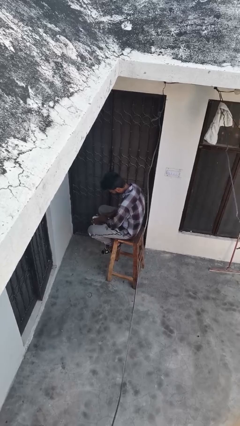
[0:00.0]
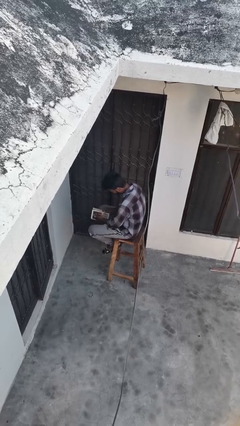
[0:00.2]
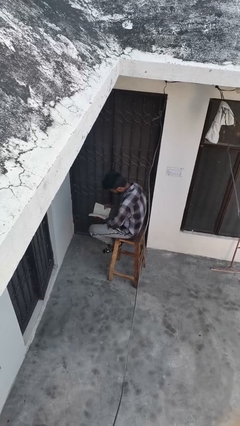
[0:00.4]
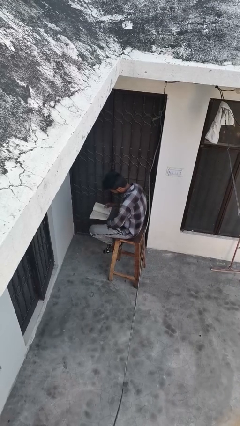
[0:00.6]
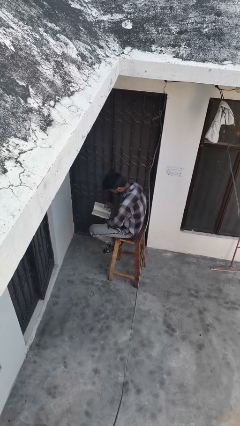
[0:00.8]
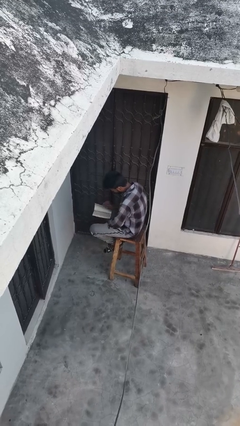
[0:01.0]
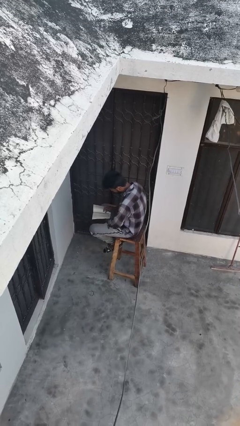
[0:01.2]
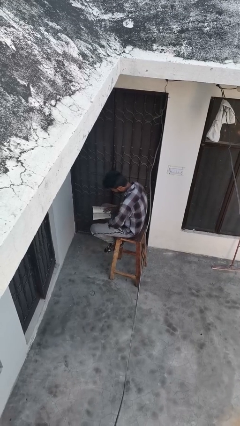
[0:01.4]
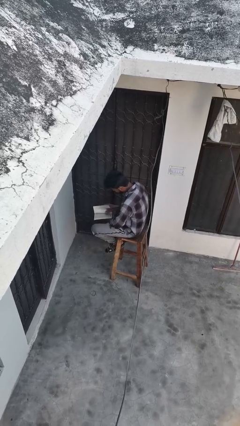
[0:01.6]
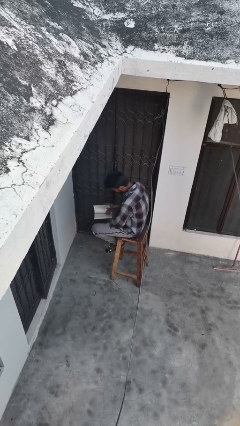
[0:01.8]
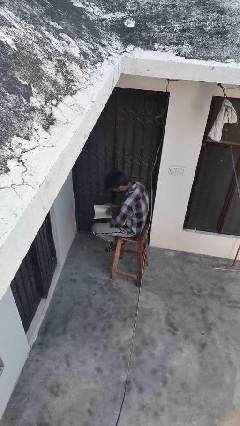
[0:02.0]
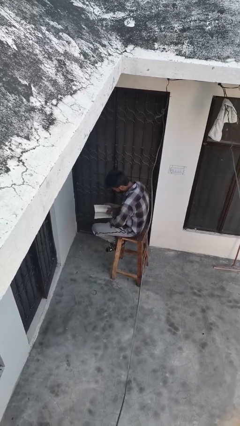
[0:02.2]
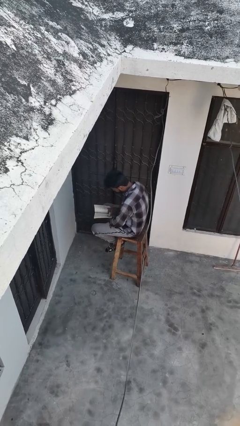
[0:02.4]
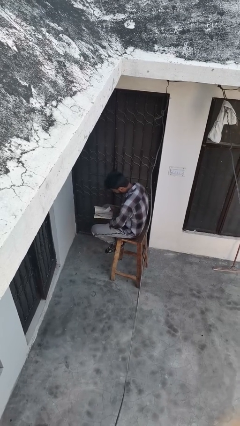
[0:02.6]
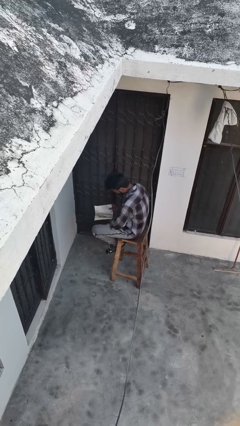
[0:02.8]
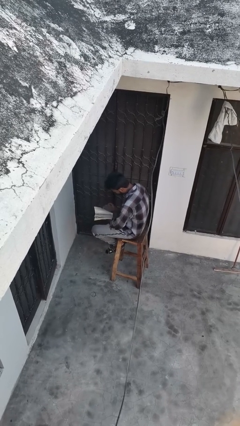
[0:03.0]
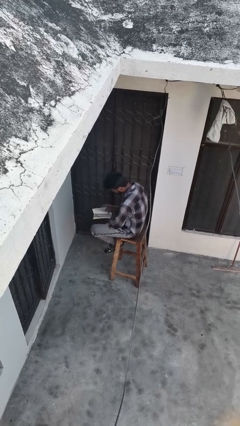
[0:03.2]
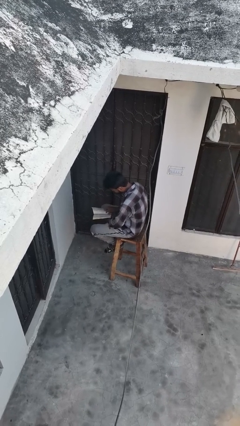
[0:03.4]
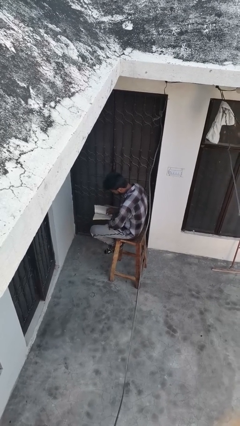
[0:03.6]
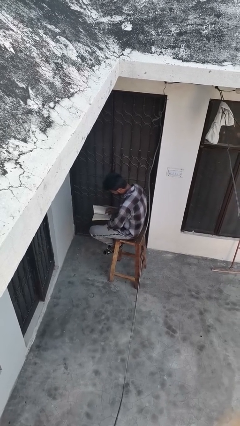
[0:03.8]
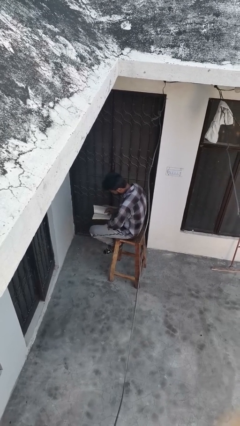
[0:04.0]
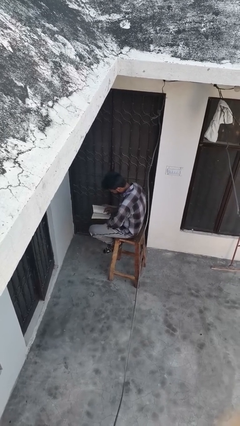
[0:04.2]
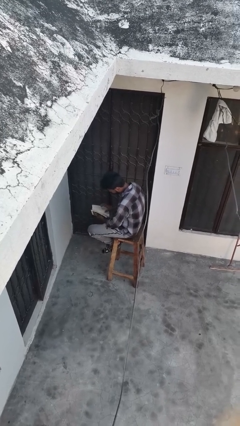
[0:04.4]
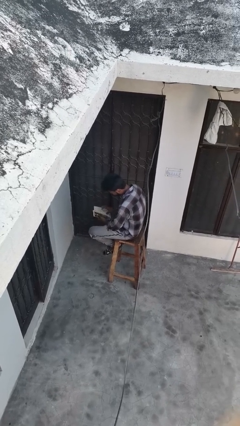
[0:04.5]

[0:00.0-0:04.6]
person reads book

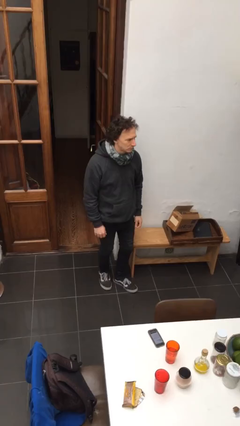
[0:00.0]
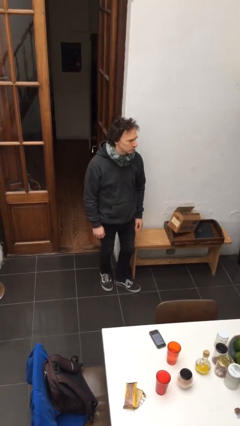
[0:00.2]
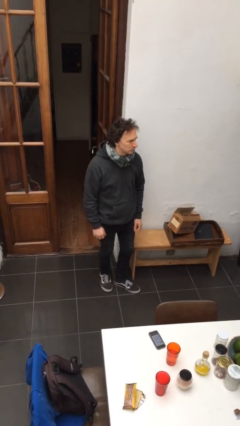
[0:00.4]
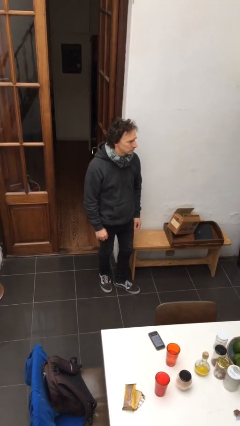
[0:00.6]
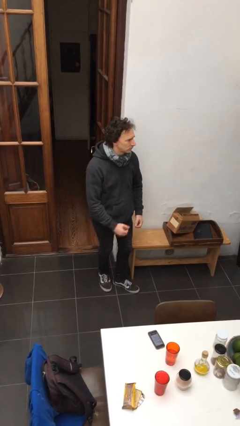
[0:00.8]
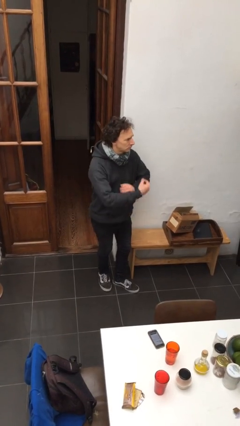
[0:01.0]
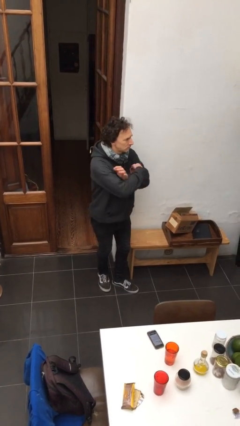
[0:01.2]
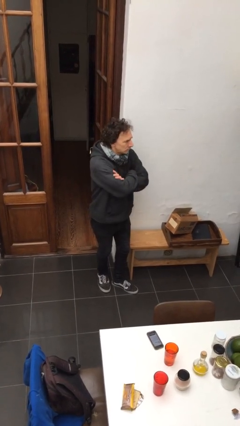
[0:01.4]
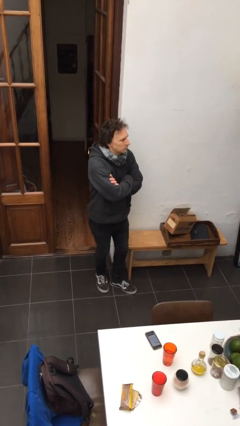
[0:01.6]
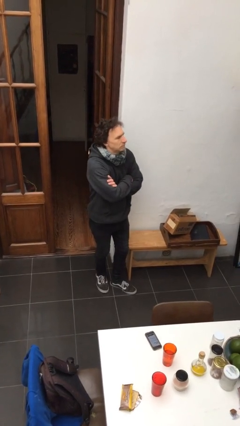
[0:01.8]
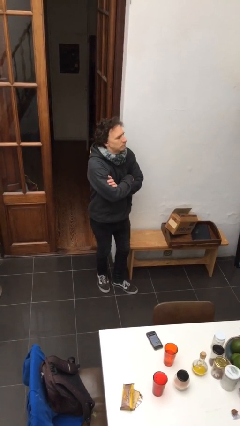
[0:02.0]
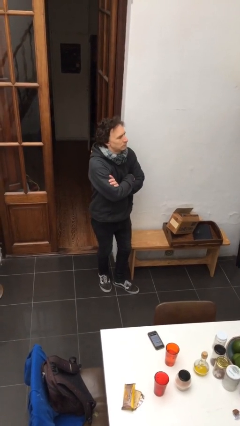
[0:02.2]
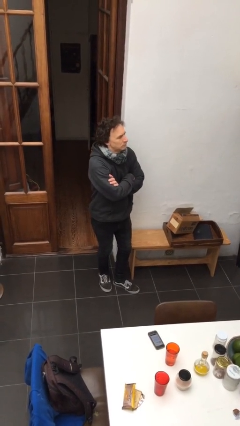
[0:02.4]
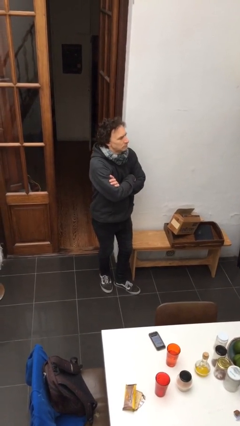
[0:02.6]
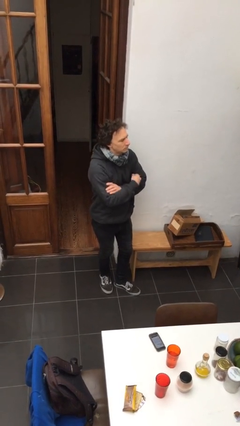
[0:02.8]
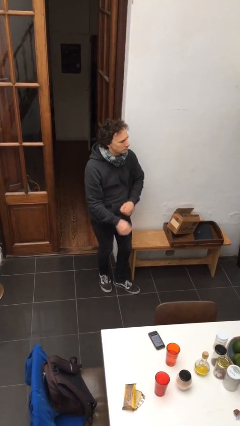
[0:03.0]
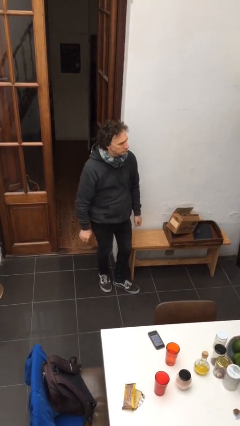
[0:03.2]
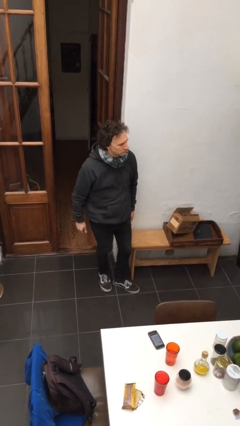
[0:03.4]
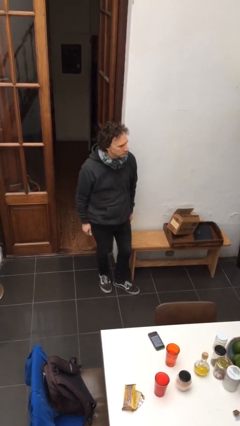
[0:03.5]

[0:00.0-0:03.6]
person crosses arms

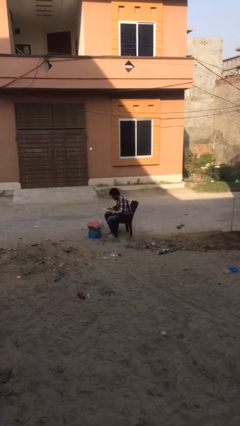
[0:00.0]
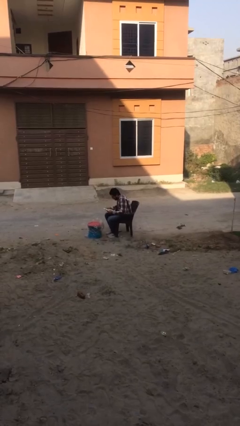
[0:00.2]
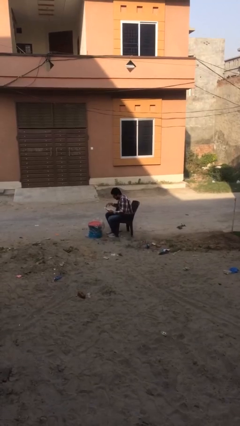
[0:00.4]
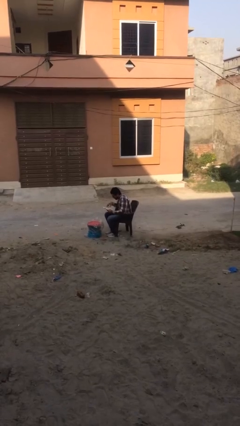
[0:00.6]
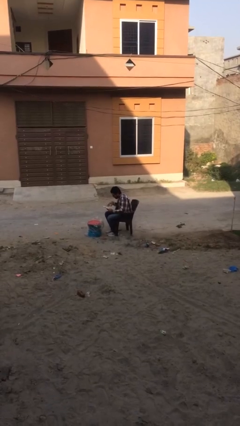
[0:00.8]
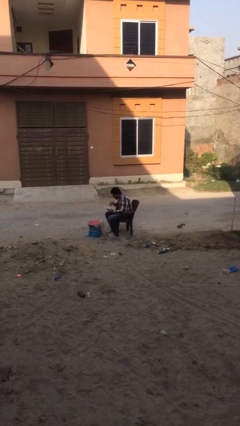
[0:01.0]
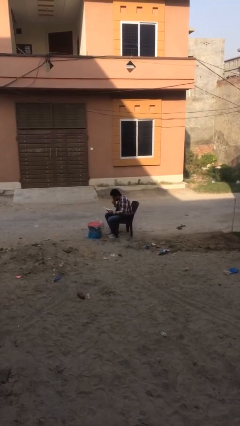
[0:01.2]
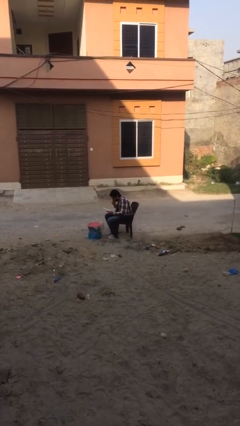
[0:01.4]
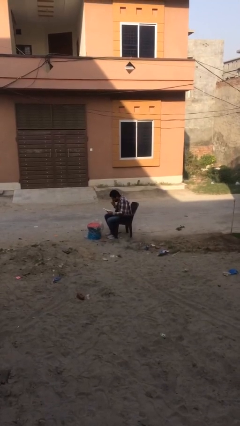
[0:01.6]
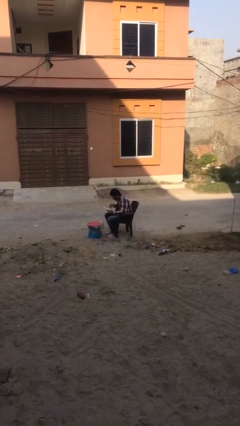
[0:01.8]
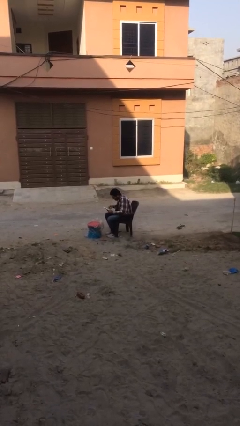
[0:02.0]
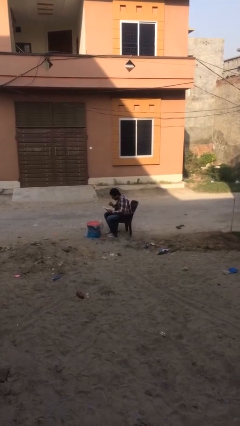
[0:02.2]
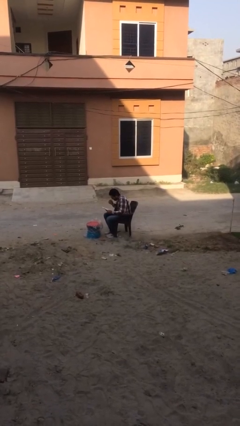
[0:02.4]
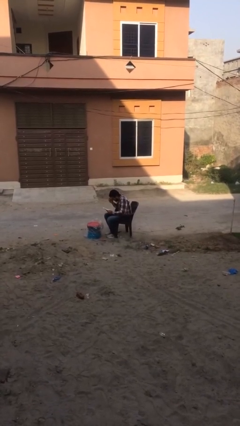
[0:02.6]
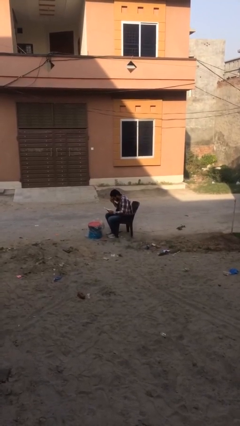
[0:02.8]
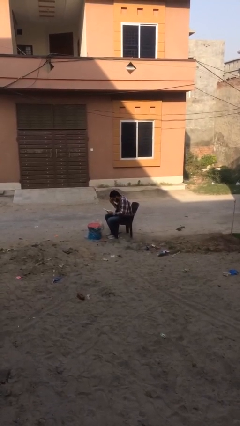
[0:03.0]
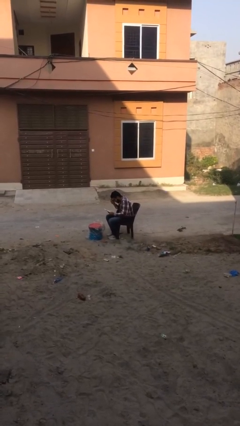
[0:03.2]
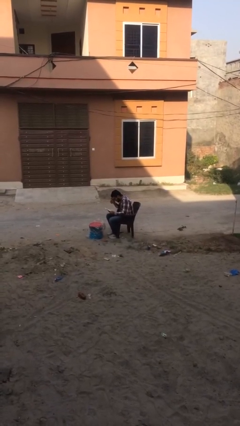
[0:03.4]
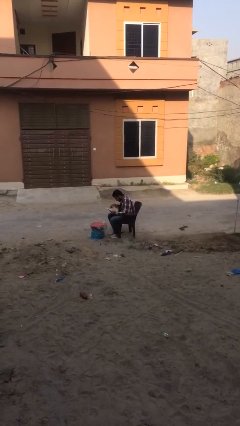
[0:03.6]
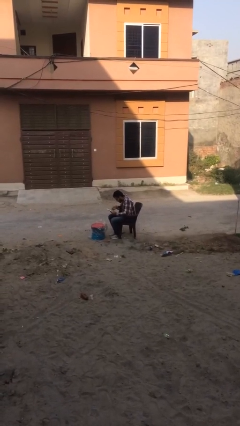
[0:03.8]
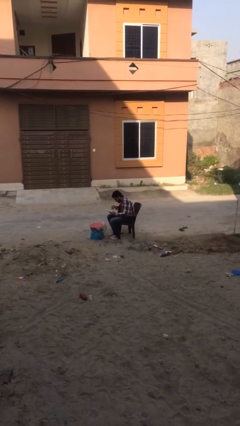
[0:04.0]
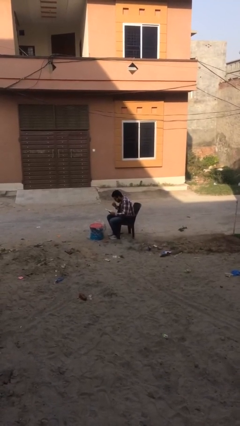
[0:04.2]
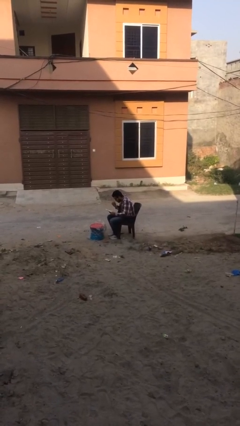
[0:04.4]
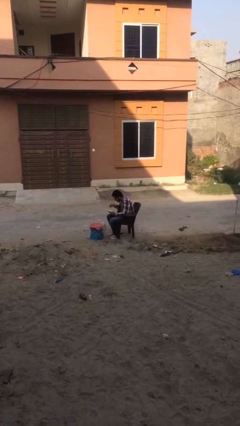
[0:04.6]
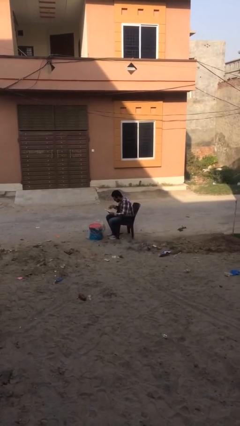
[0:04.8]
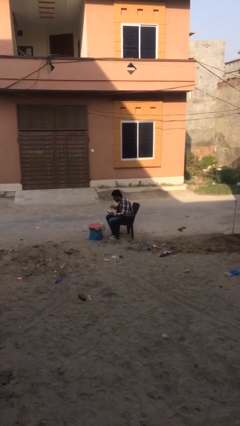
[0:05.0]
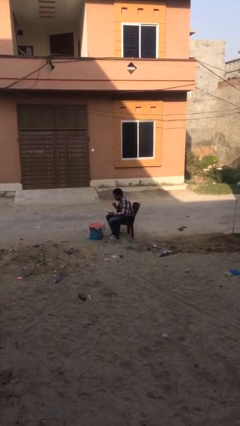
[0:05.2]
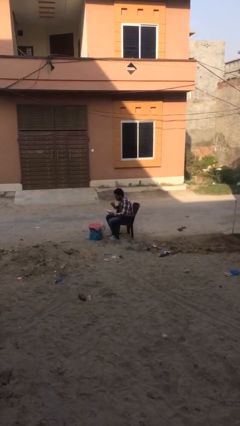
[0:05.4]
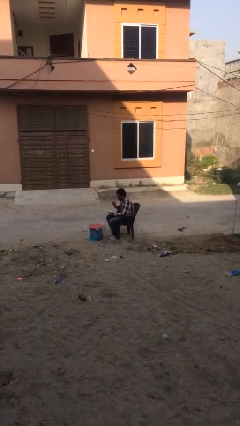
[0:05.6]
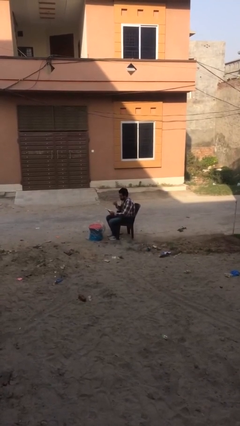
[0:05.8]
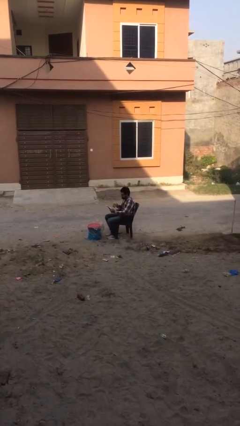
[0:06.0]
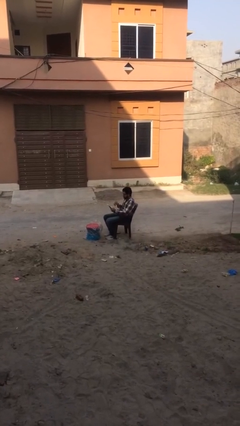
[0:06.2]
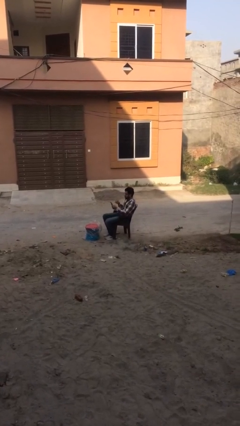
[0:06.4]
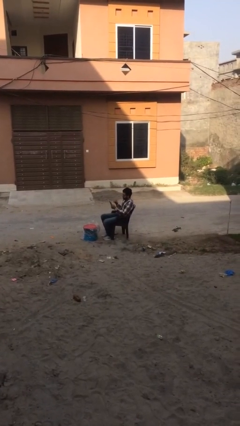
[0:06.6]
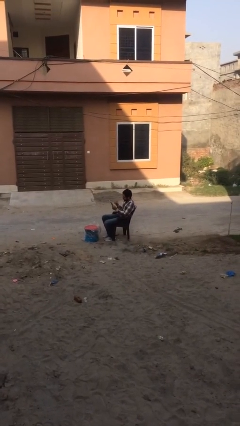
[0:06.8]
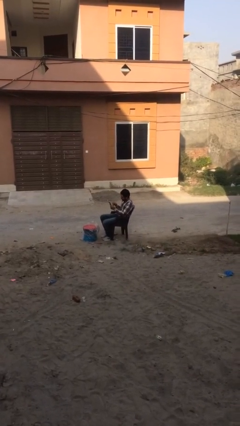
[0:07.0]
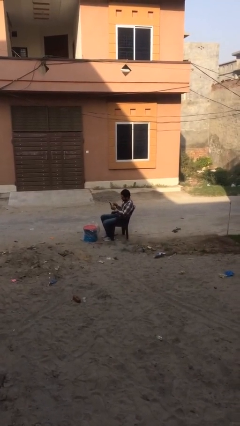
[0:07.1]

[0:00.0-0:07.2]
person reads document

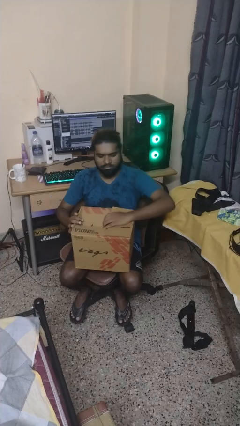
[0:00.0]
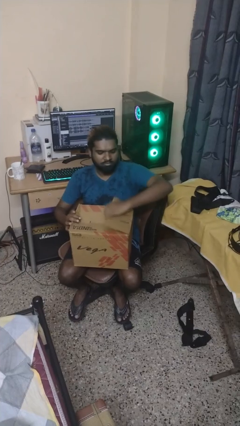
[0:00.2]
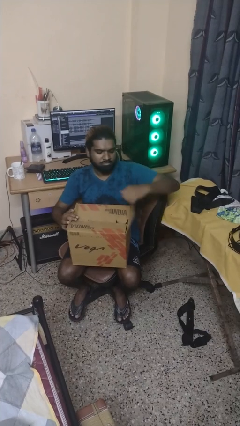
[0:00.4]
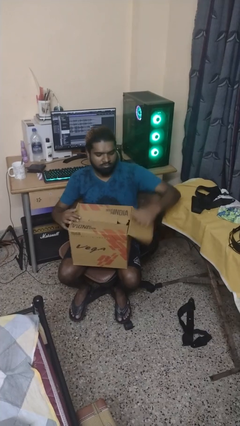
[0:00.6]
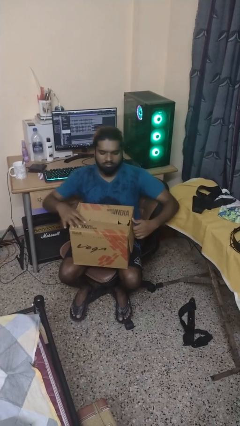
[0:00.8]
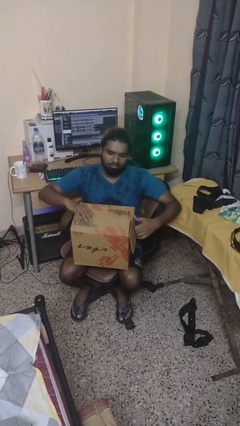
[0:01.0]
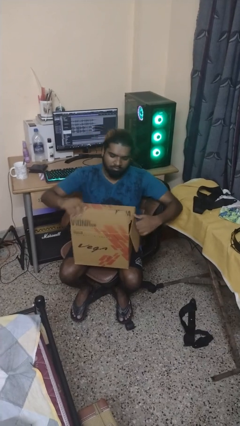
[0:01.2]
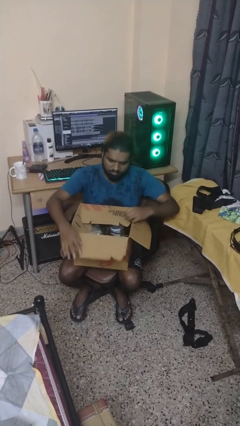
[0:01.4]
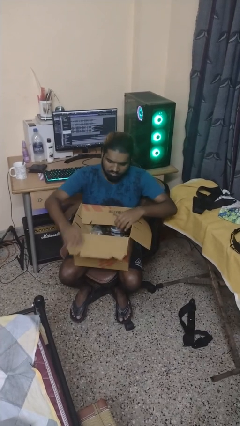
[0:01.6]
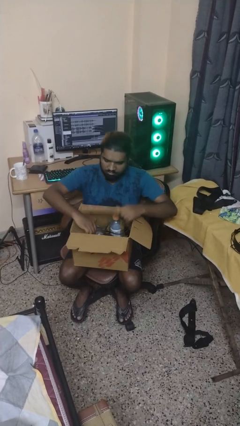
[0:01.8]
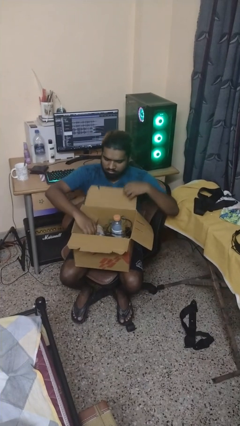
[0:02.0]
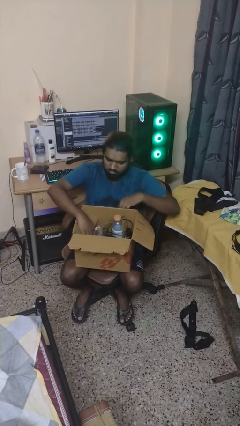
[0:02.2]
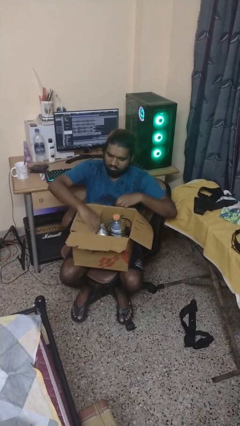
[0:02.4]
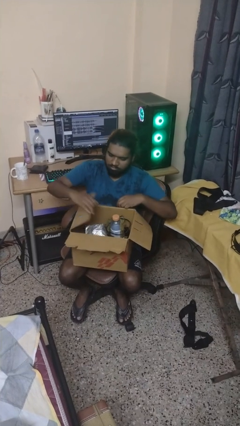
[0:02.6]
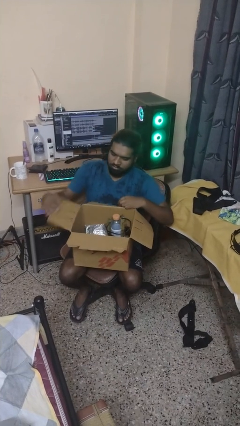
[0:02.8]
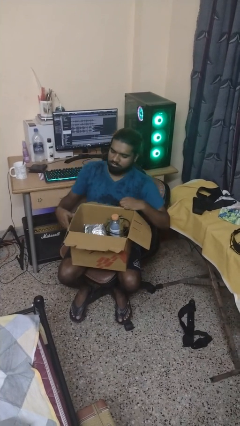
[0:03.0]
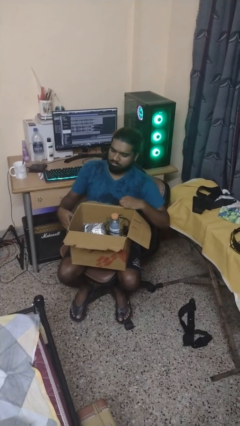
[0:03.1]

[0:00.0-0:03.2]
person opens box
